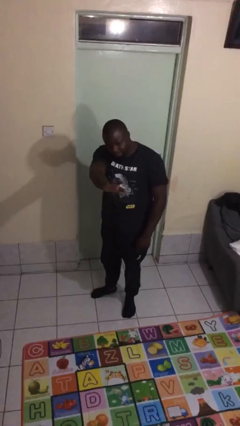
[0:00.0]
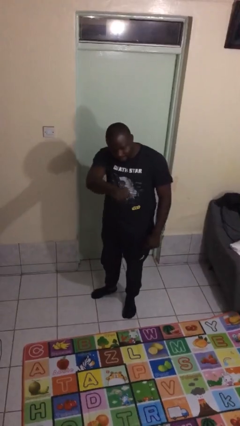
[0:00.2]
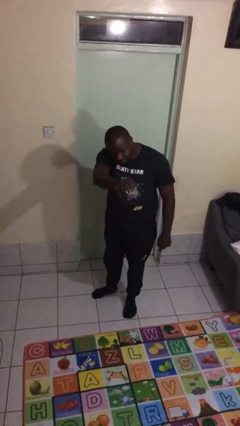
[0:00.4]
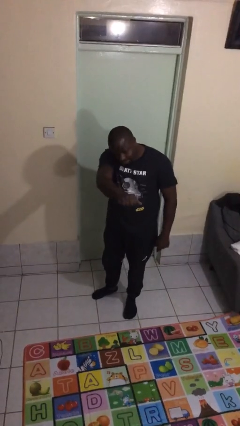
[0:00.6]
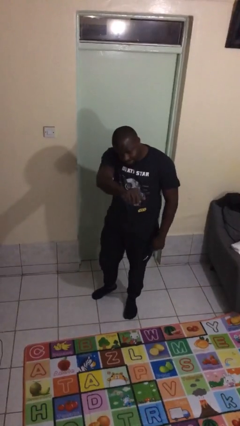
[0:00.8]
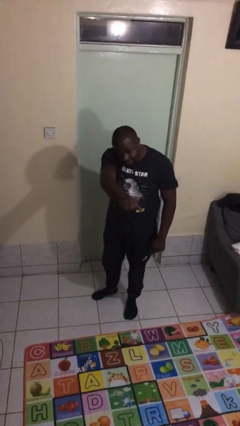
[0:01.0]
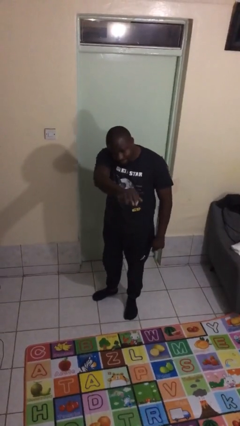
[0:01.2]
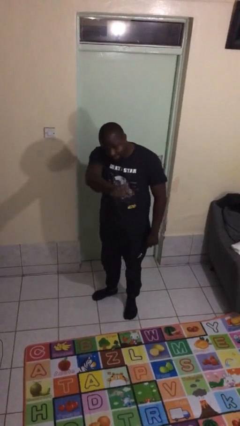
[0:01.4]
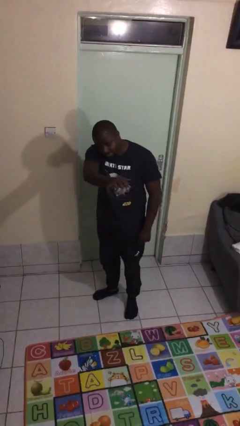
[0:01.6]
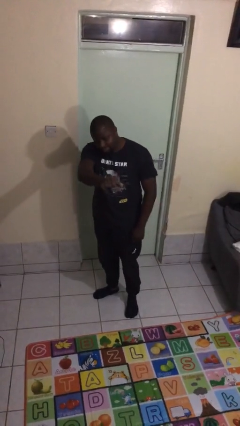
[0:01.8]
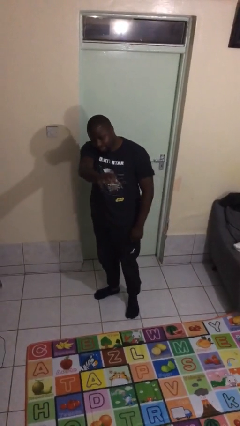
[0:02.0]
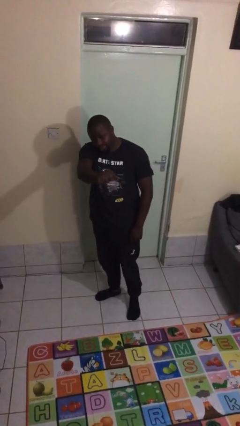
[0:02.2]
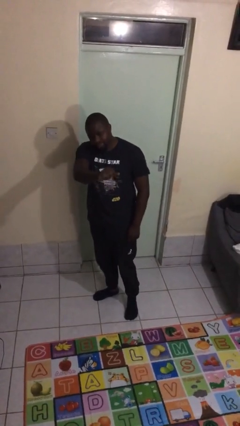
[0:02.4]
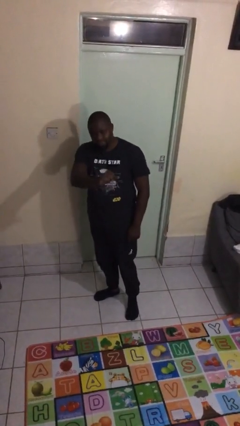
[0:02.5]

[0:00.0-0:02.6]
person gestures come here

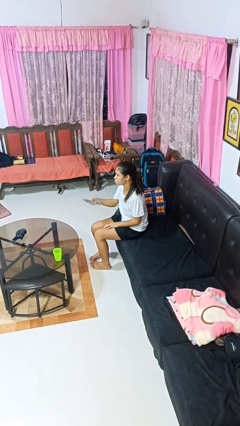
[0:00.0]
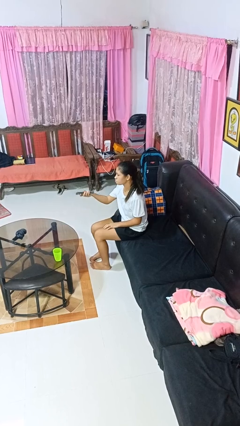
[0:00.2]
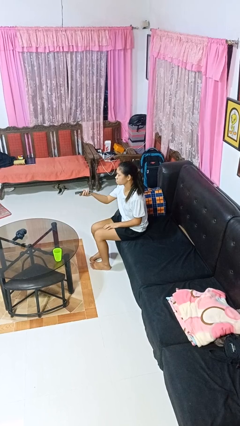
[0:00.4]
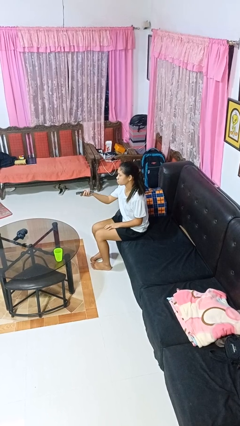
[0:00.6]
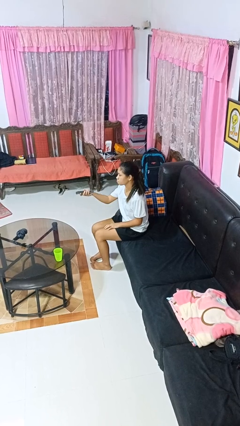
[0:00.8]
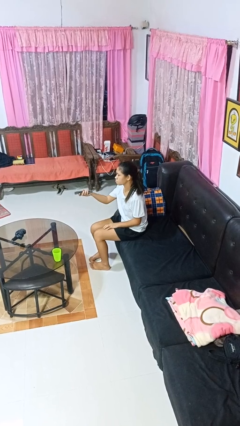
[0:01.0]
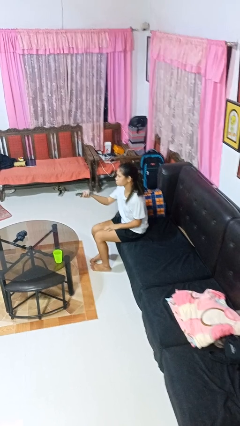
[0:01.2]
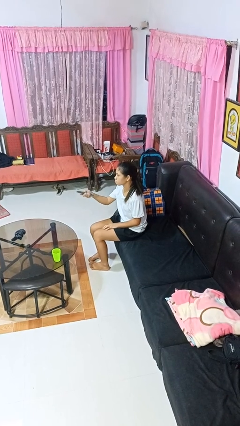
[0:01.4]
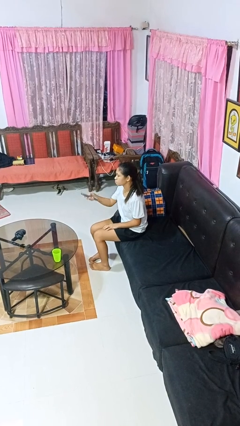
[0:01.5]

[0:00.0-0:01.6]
person uses television remote

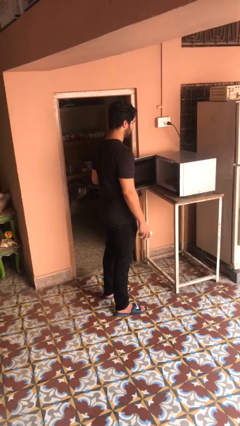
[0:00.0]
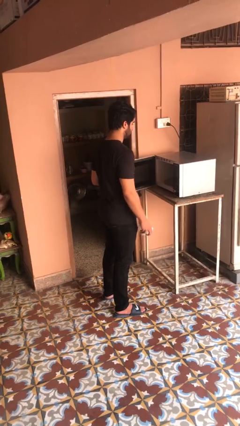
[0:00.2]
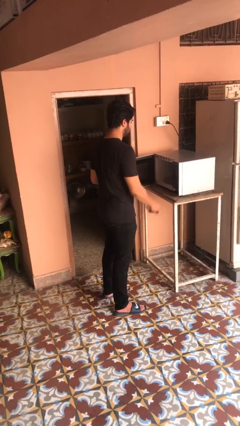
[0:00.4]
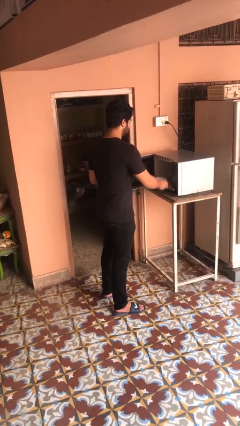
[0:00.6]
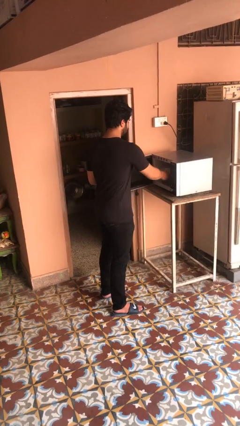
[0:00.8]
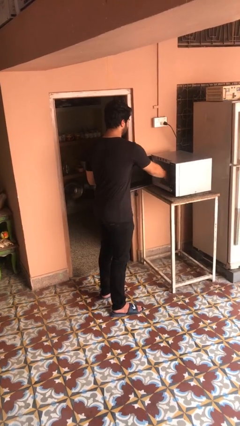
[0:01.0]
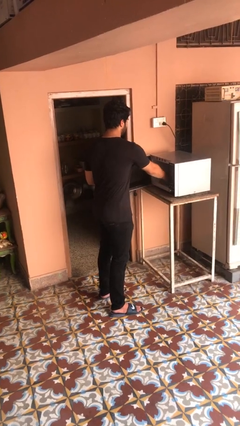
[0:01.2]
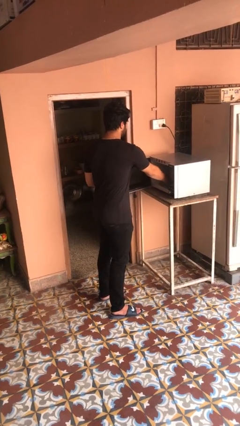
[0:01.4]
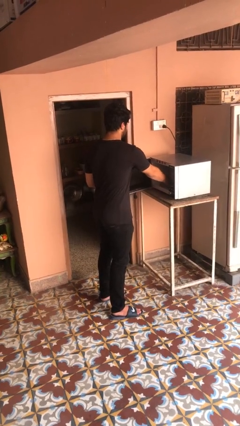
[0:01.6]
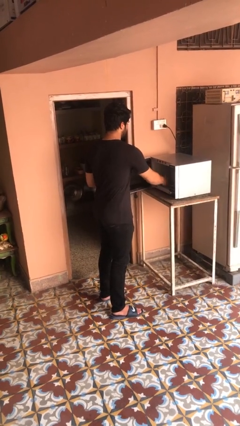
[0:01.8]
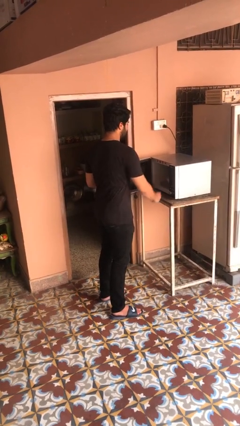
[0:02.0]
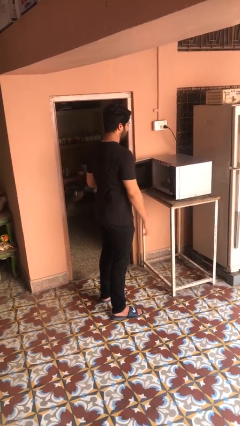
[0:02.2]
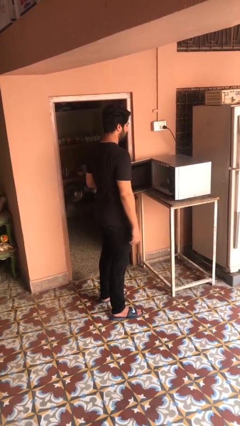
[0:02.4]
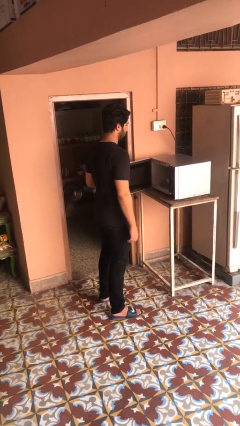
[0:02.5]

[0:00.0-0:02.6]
person puts object into microwave

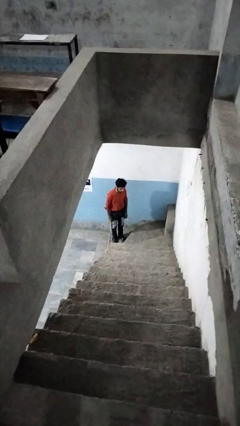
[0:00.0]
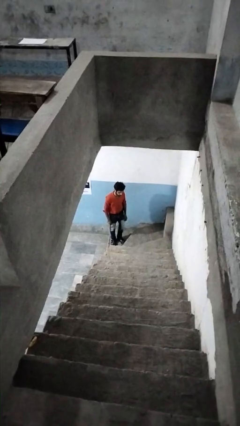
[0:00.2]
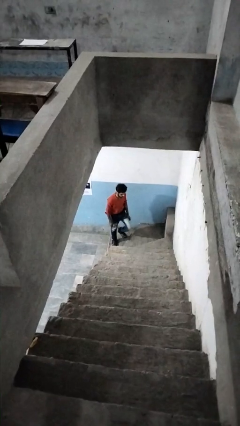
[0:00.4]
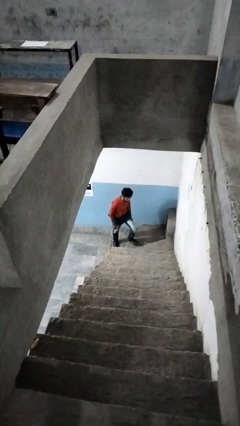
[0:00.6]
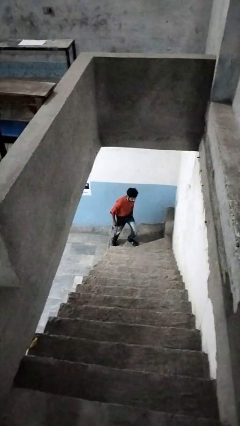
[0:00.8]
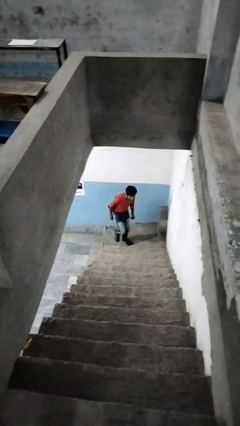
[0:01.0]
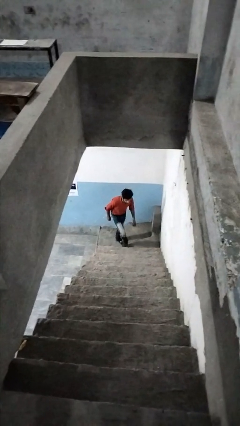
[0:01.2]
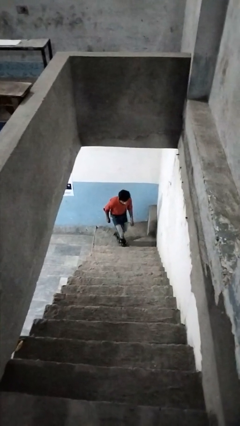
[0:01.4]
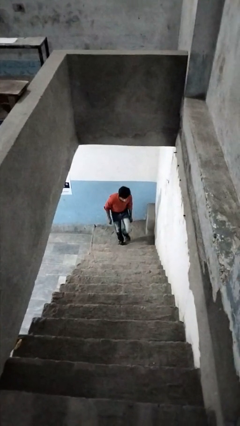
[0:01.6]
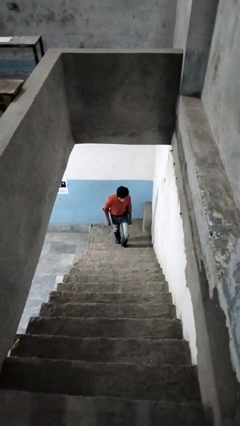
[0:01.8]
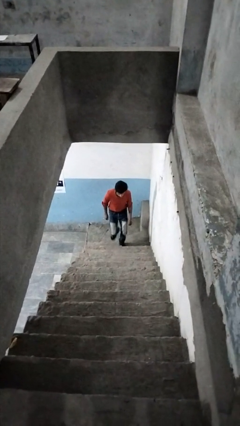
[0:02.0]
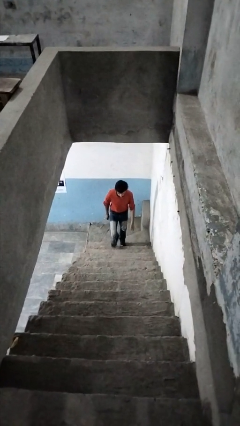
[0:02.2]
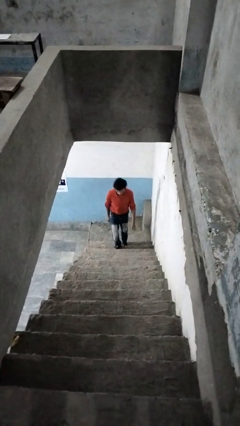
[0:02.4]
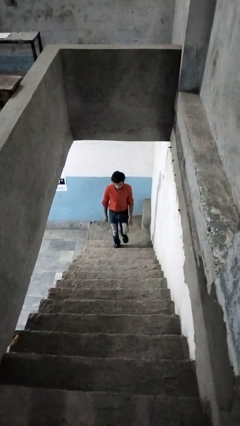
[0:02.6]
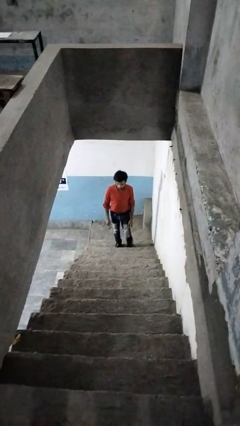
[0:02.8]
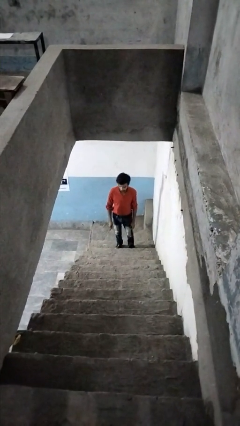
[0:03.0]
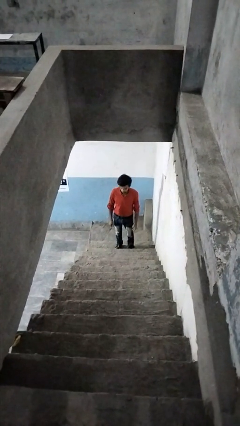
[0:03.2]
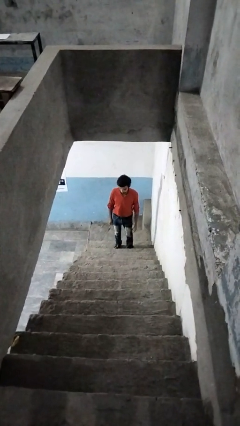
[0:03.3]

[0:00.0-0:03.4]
person climbs up stairs

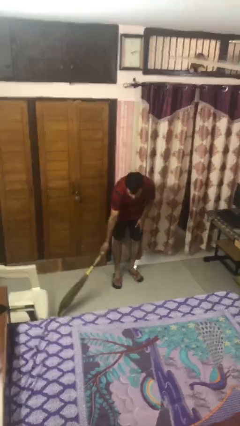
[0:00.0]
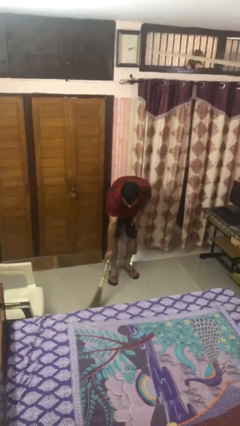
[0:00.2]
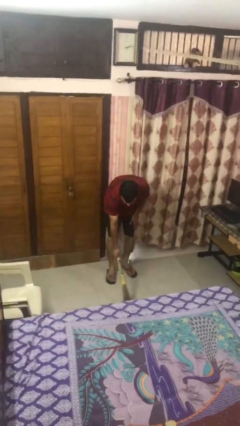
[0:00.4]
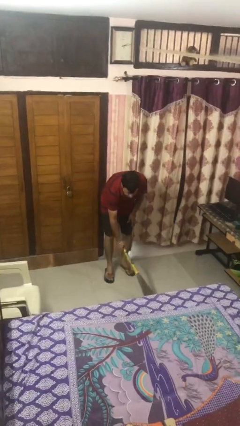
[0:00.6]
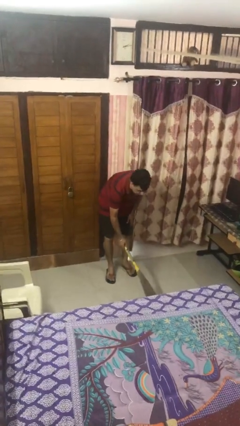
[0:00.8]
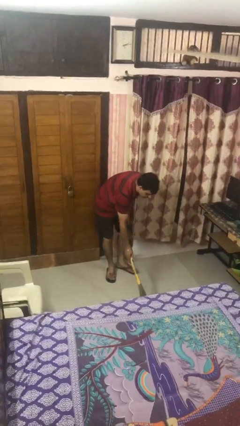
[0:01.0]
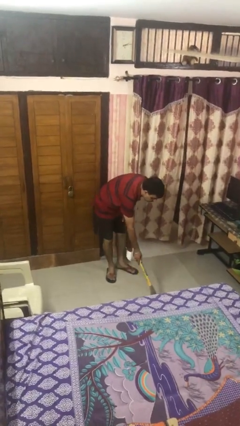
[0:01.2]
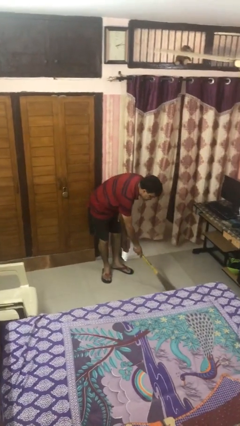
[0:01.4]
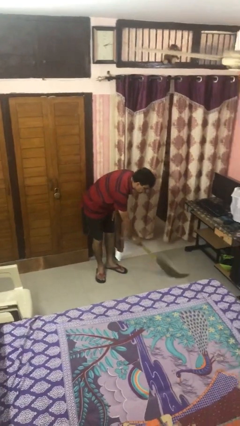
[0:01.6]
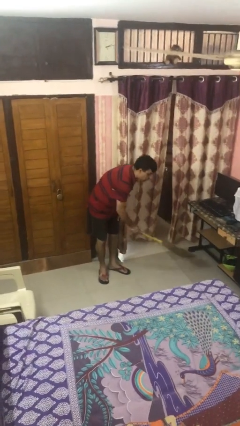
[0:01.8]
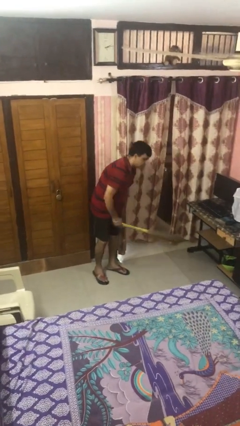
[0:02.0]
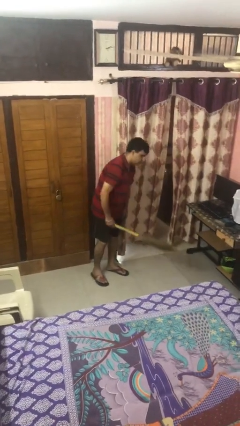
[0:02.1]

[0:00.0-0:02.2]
person sweeps floor

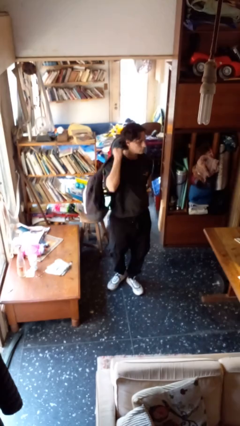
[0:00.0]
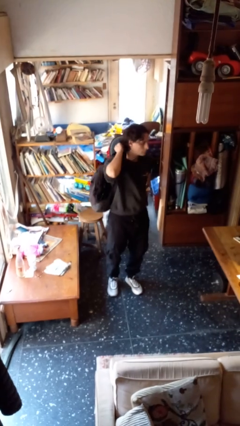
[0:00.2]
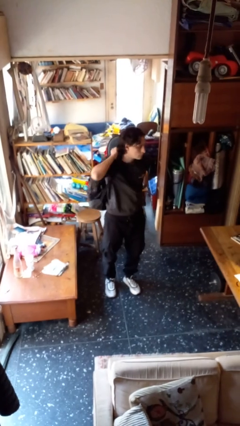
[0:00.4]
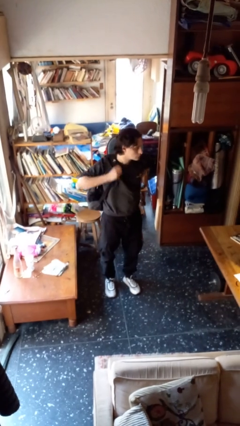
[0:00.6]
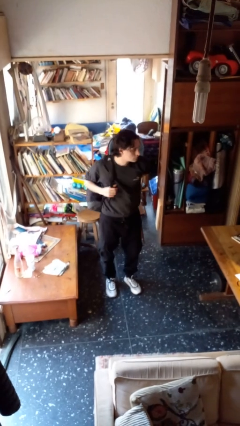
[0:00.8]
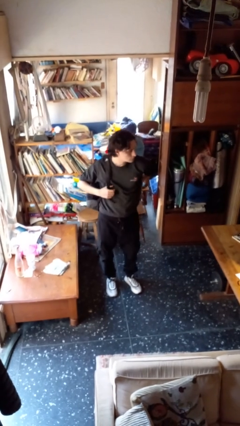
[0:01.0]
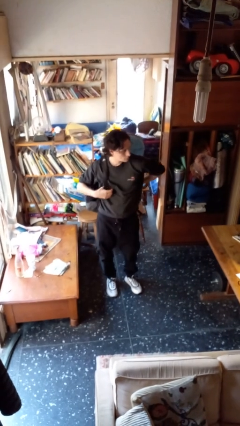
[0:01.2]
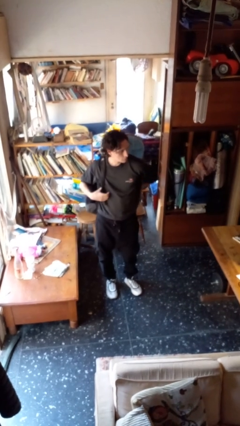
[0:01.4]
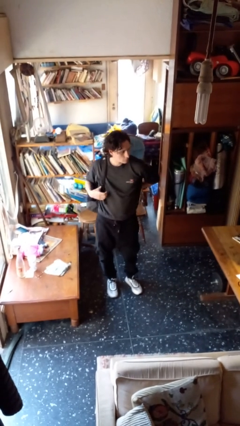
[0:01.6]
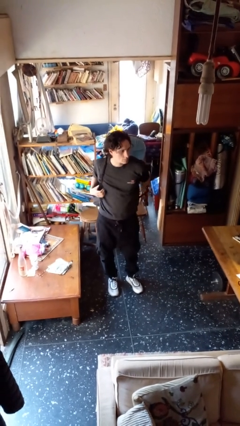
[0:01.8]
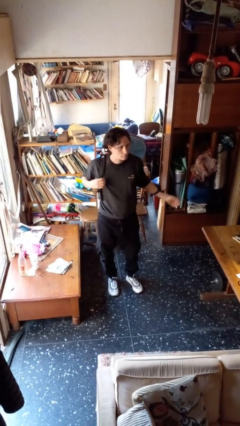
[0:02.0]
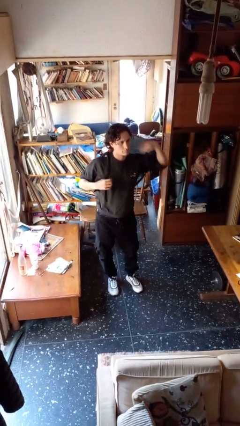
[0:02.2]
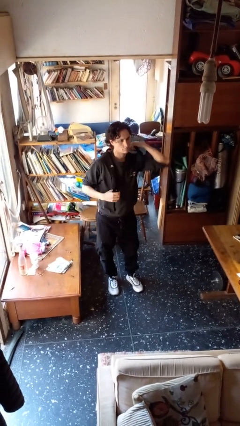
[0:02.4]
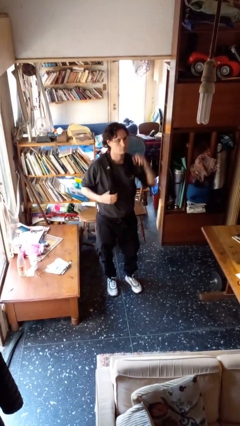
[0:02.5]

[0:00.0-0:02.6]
person puts on backpack

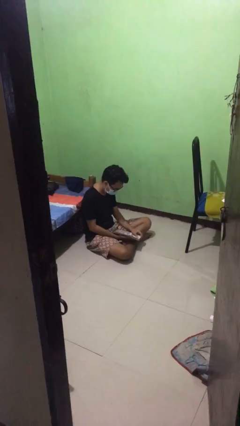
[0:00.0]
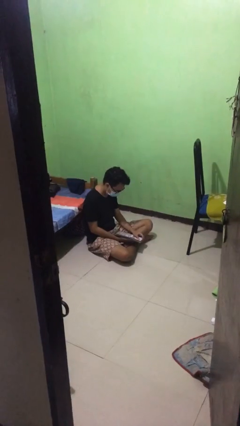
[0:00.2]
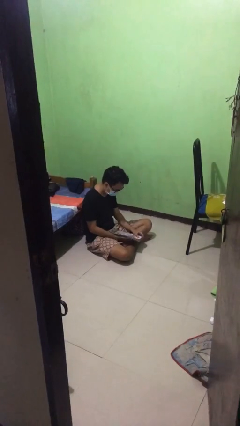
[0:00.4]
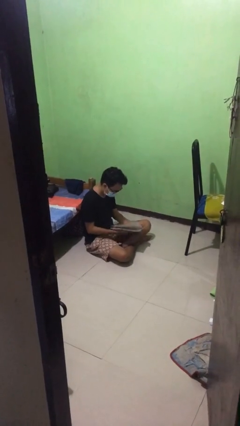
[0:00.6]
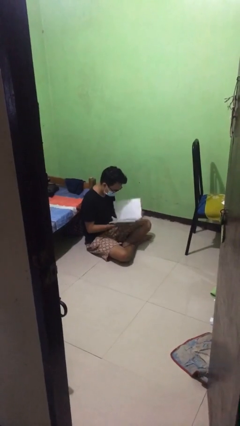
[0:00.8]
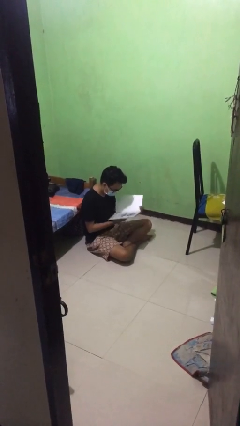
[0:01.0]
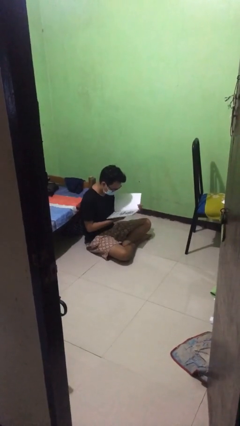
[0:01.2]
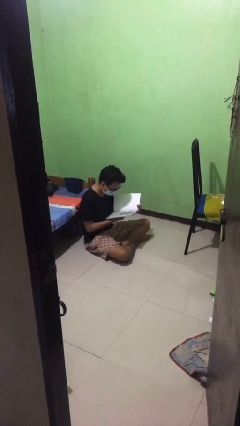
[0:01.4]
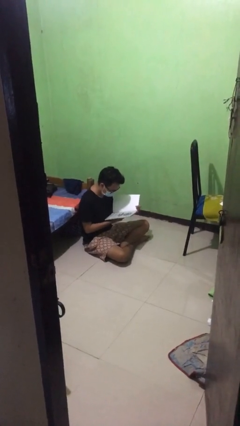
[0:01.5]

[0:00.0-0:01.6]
person reads document

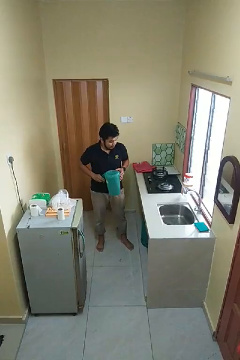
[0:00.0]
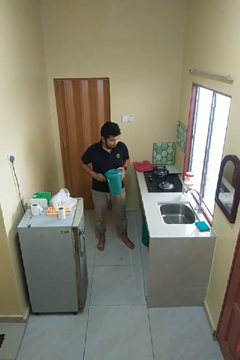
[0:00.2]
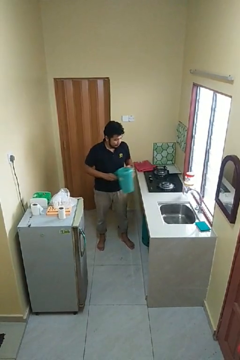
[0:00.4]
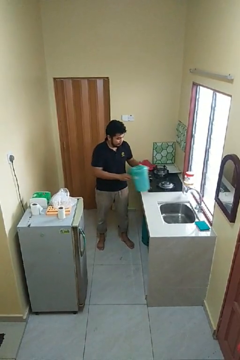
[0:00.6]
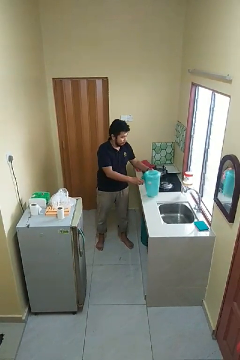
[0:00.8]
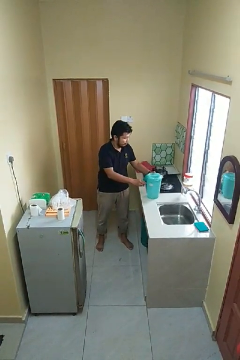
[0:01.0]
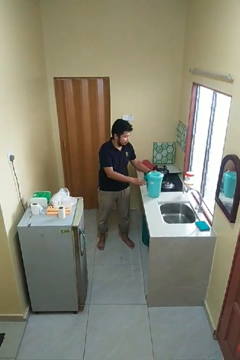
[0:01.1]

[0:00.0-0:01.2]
person puts down object on countertop
